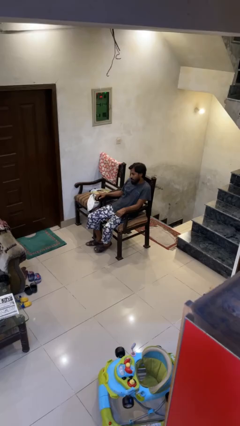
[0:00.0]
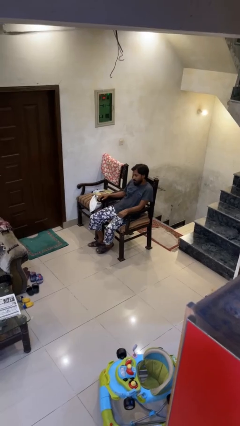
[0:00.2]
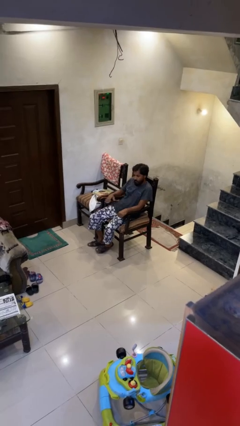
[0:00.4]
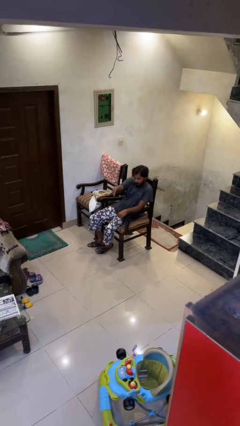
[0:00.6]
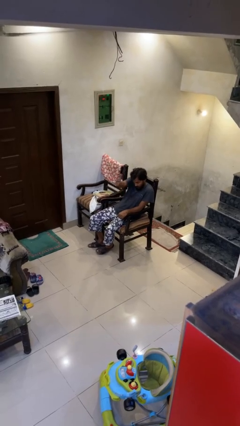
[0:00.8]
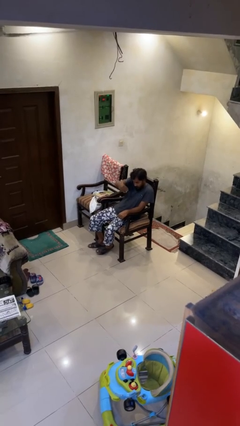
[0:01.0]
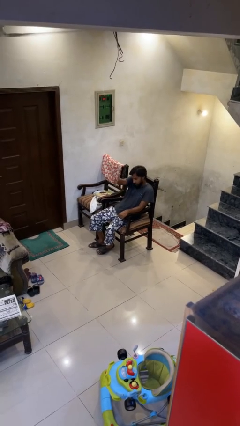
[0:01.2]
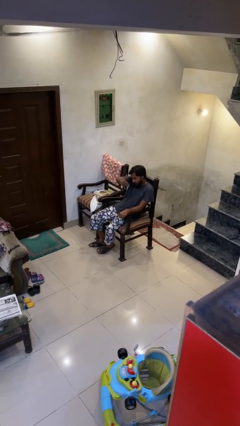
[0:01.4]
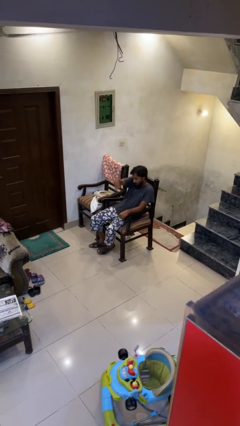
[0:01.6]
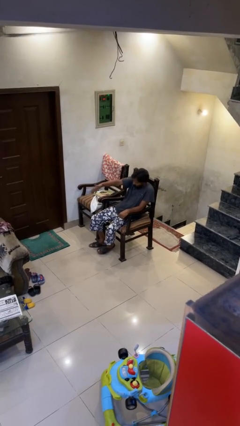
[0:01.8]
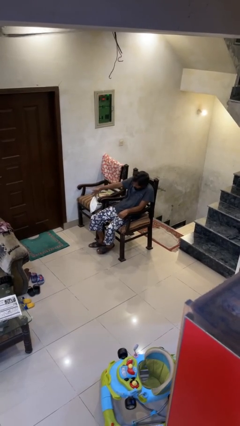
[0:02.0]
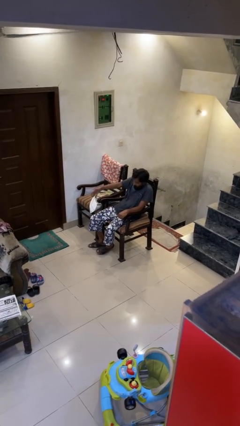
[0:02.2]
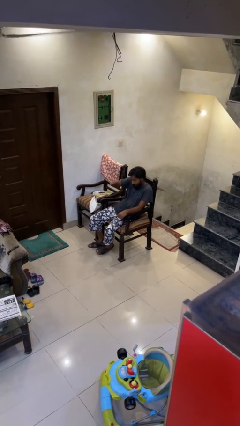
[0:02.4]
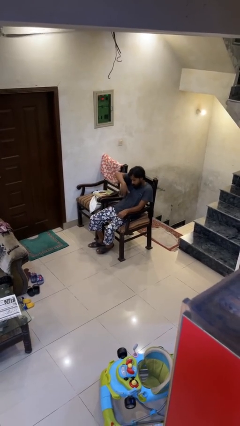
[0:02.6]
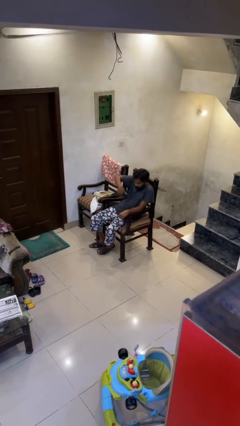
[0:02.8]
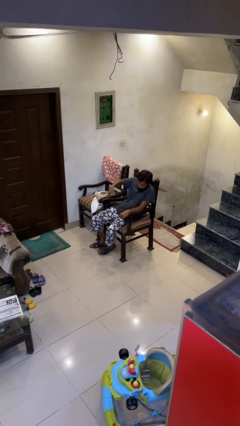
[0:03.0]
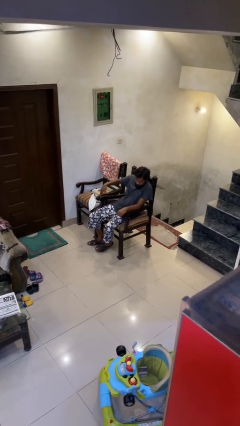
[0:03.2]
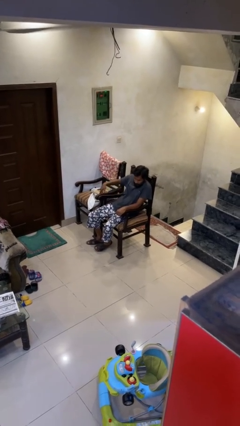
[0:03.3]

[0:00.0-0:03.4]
person gestures come here

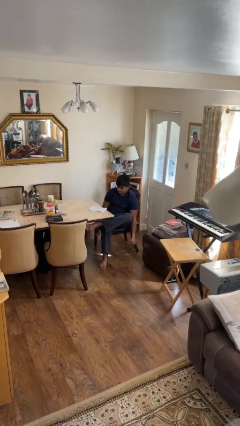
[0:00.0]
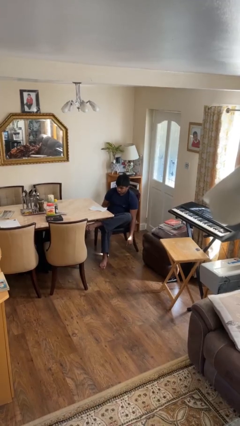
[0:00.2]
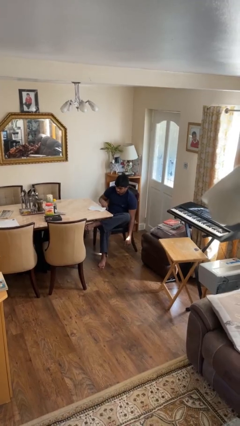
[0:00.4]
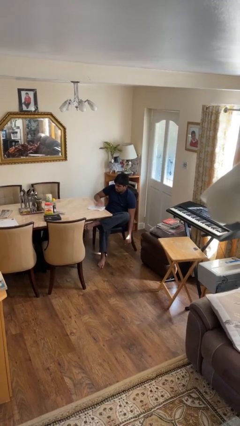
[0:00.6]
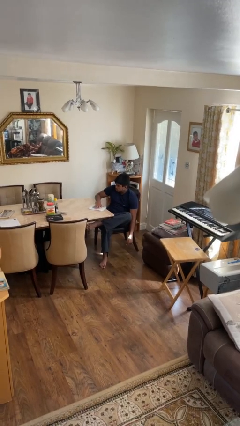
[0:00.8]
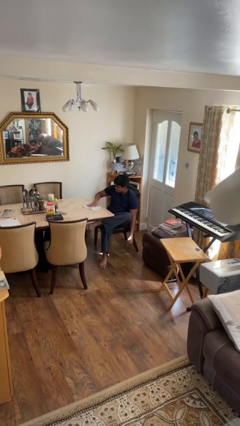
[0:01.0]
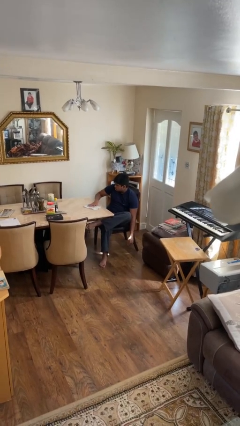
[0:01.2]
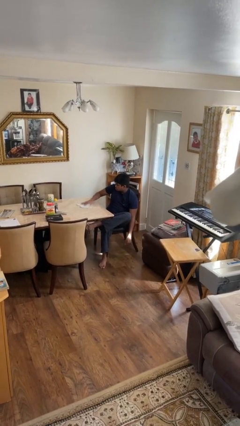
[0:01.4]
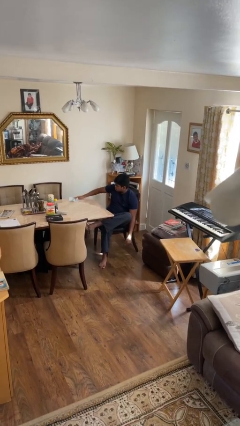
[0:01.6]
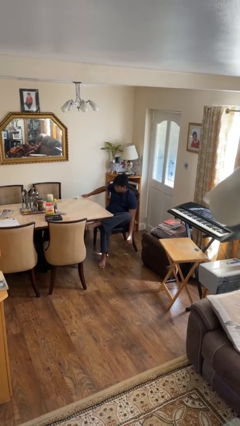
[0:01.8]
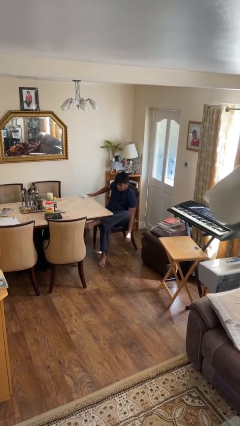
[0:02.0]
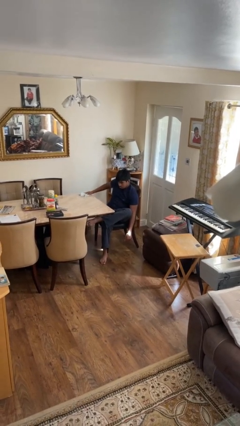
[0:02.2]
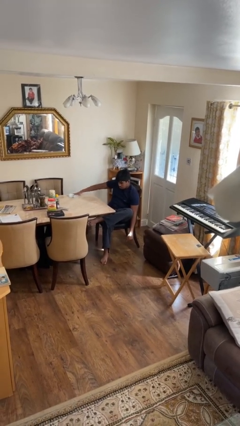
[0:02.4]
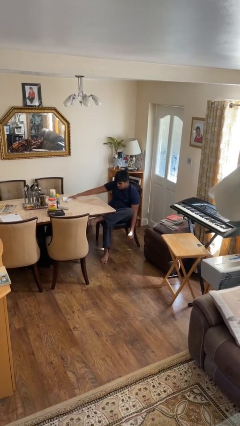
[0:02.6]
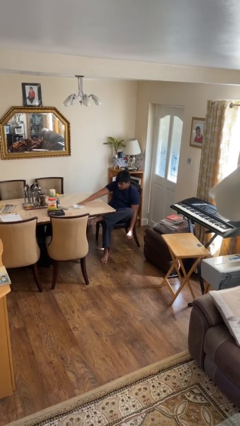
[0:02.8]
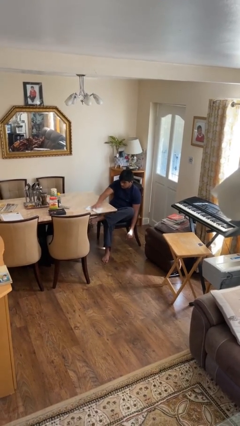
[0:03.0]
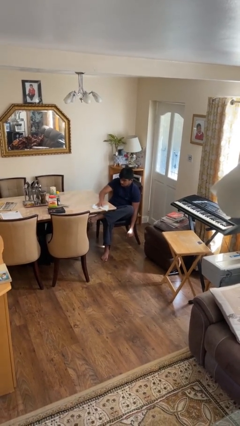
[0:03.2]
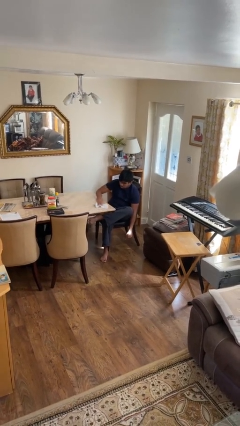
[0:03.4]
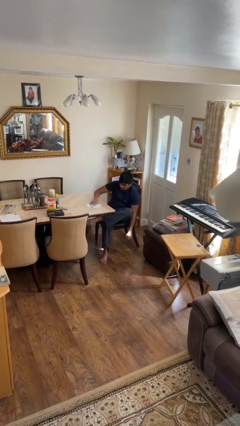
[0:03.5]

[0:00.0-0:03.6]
person cleans table with rag

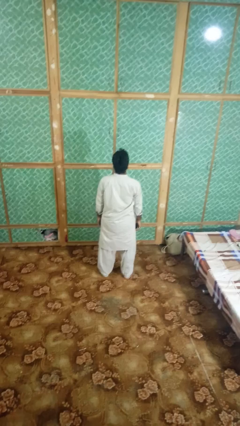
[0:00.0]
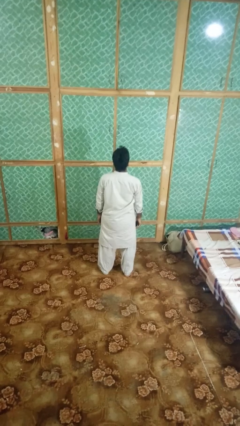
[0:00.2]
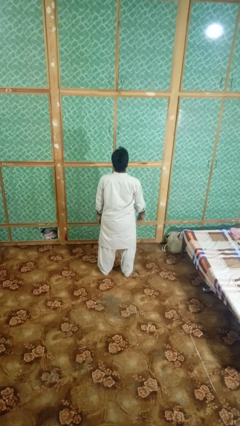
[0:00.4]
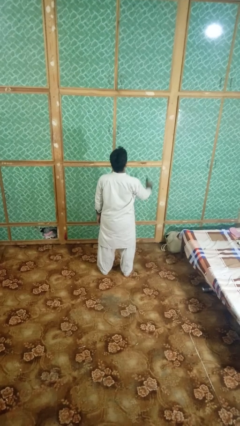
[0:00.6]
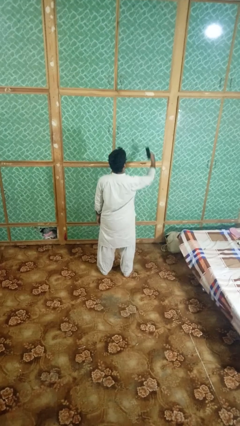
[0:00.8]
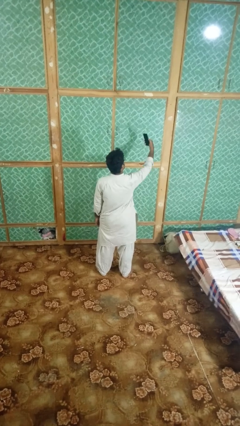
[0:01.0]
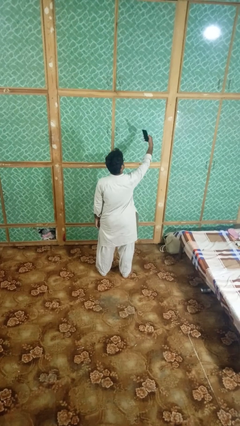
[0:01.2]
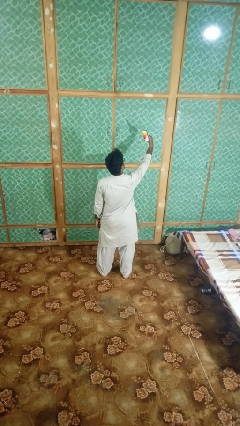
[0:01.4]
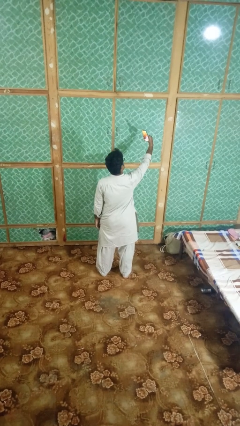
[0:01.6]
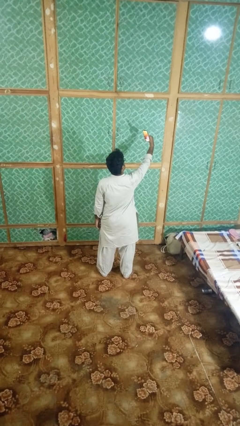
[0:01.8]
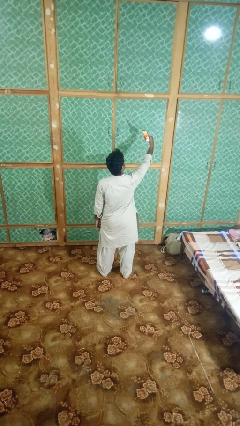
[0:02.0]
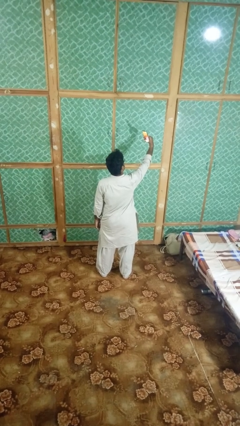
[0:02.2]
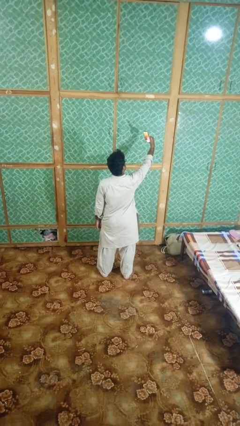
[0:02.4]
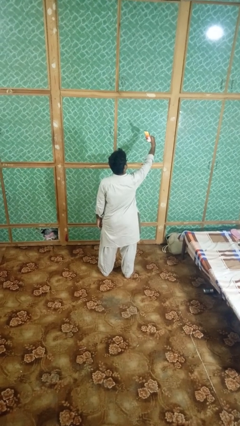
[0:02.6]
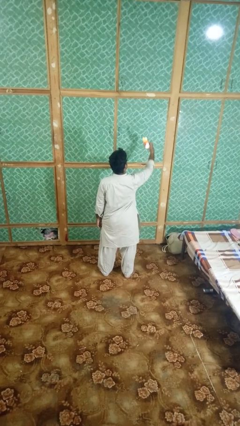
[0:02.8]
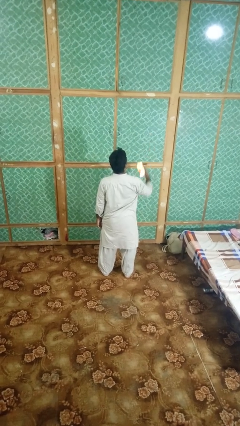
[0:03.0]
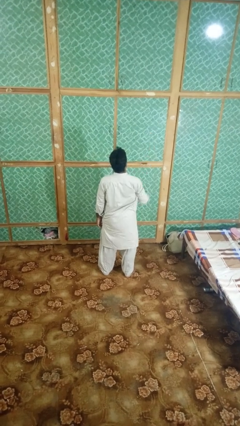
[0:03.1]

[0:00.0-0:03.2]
person takes selfie

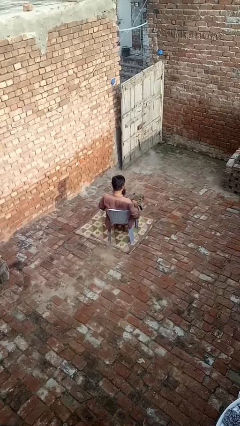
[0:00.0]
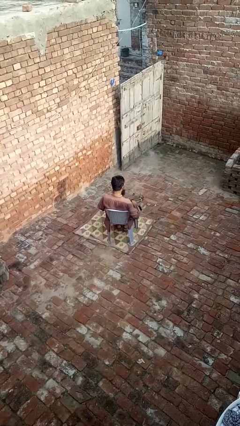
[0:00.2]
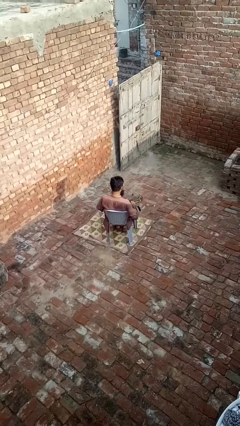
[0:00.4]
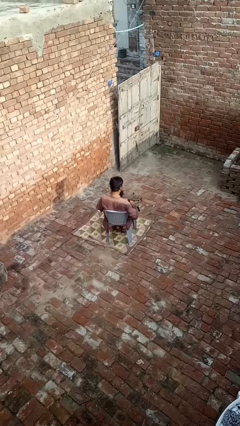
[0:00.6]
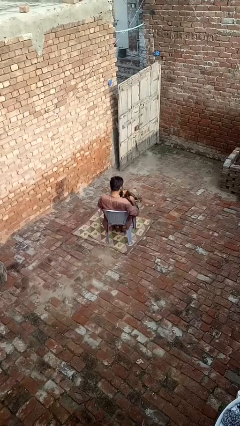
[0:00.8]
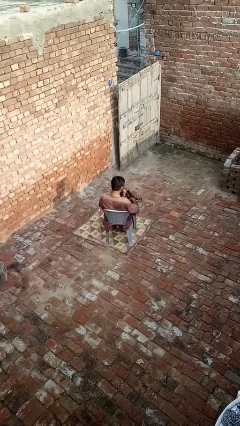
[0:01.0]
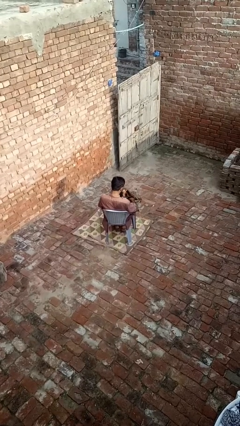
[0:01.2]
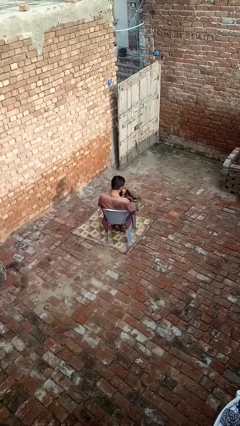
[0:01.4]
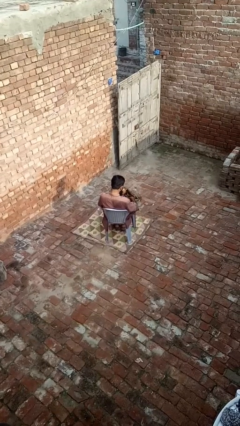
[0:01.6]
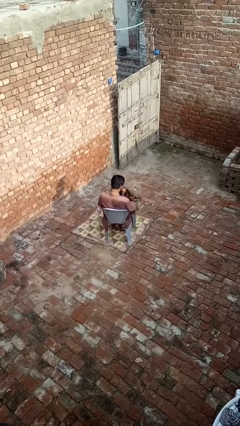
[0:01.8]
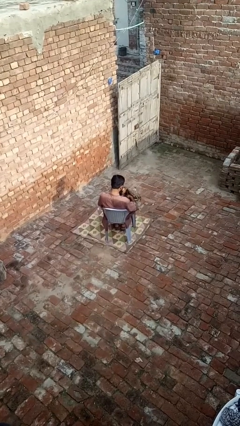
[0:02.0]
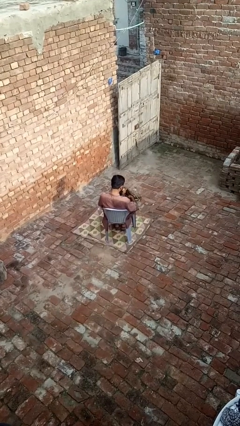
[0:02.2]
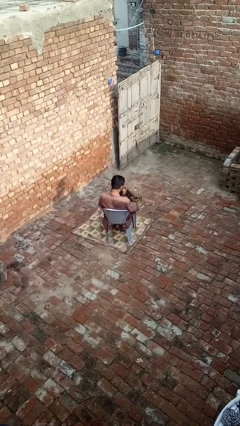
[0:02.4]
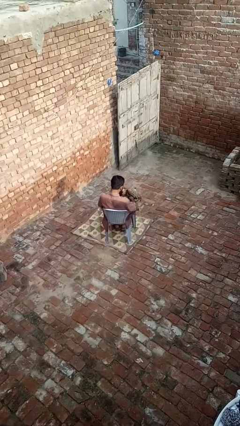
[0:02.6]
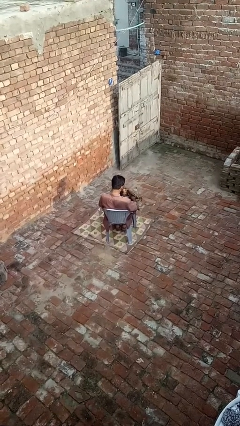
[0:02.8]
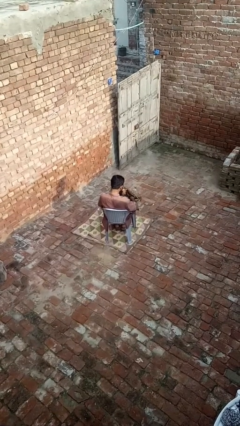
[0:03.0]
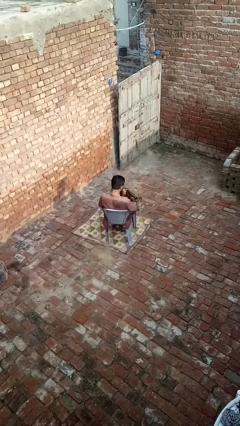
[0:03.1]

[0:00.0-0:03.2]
person searches in purse

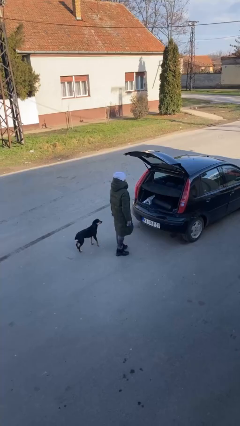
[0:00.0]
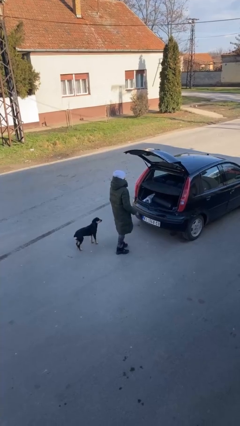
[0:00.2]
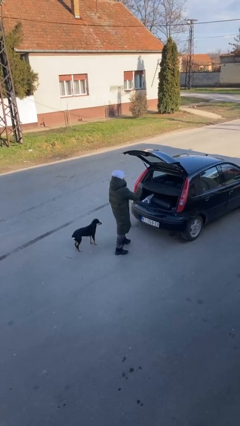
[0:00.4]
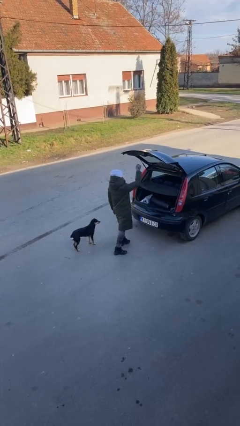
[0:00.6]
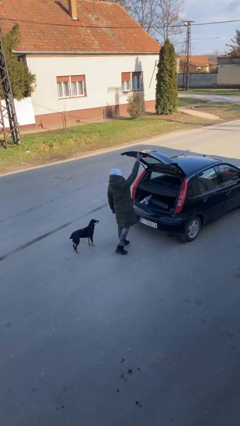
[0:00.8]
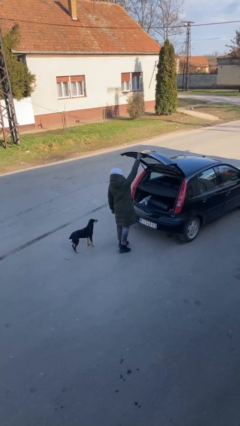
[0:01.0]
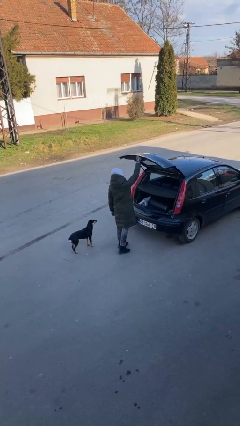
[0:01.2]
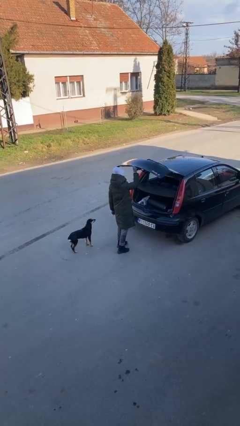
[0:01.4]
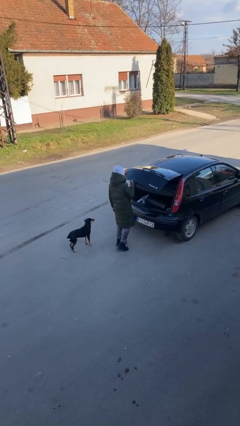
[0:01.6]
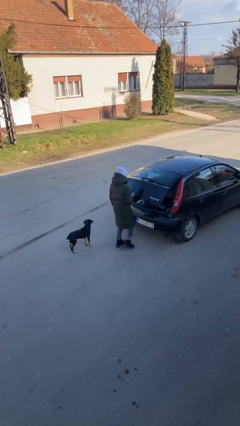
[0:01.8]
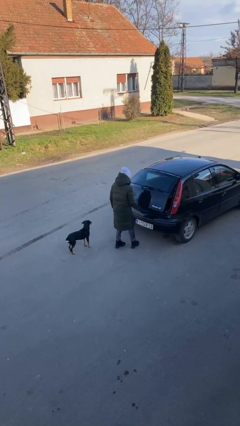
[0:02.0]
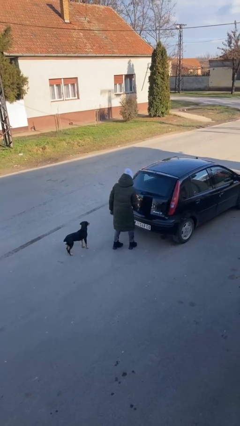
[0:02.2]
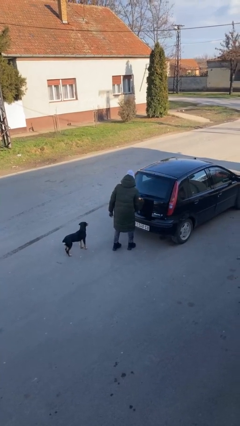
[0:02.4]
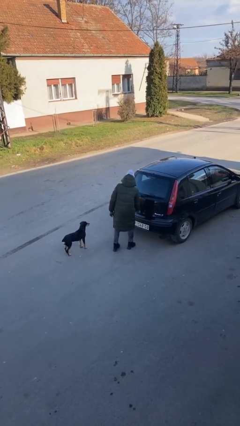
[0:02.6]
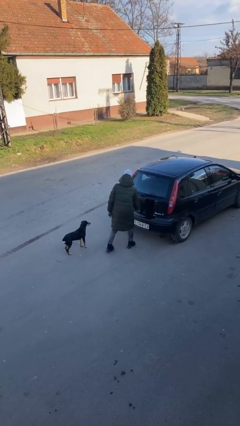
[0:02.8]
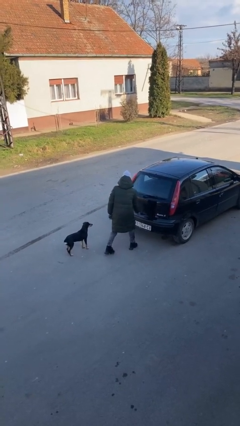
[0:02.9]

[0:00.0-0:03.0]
person closes car trunk

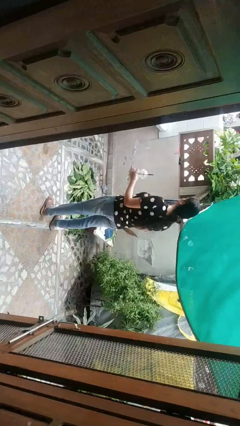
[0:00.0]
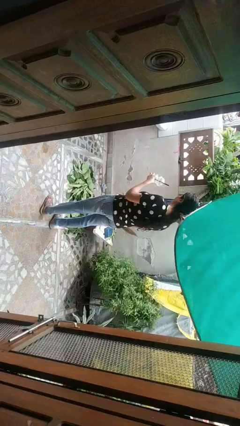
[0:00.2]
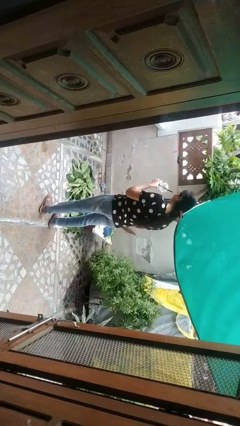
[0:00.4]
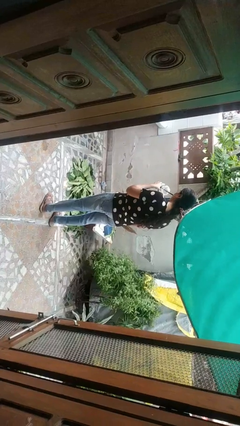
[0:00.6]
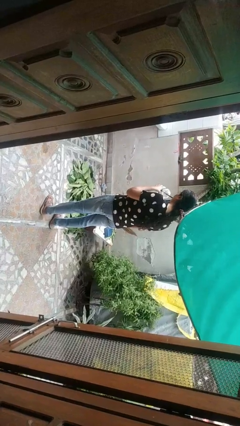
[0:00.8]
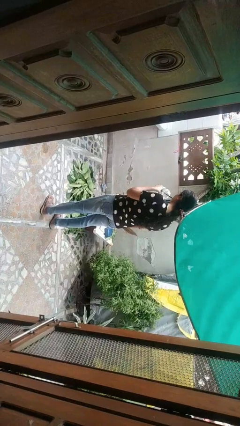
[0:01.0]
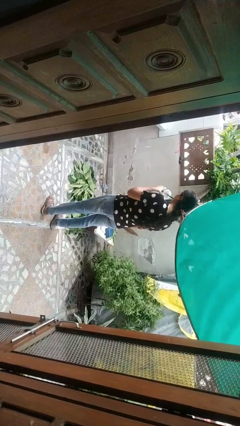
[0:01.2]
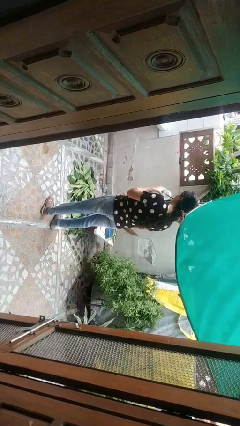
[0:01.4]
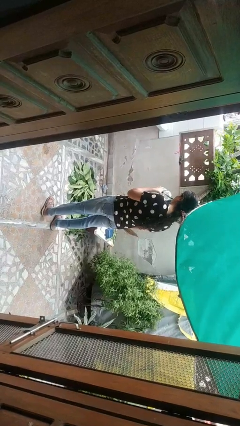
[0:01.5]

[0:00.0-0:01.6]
person drinks from straw
